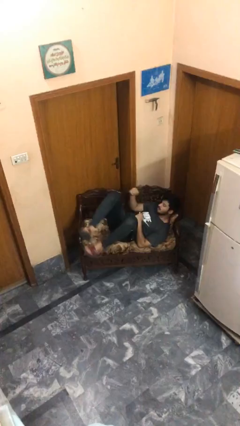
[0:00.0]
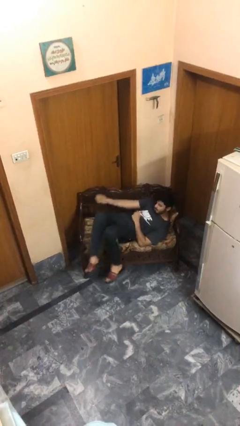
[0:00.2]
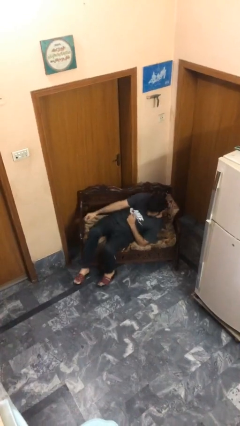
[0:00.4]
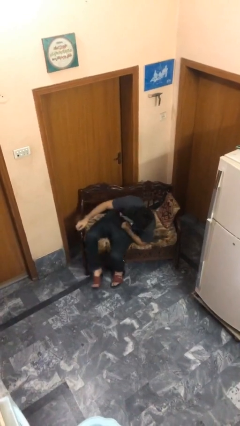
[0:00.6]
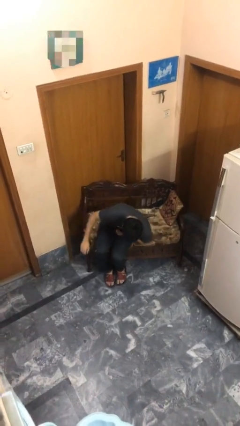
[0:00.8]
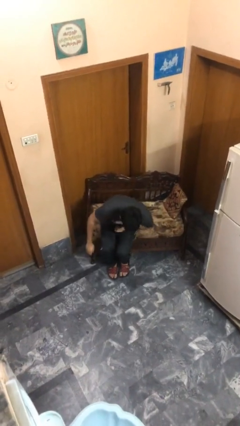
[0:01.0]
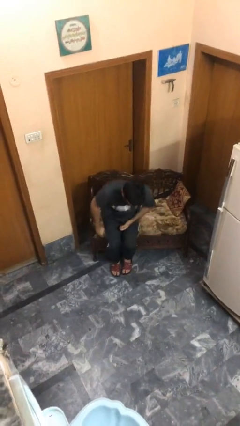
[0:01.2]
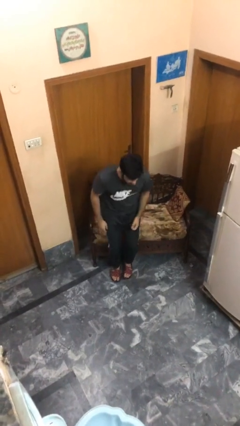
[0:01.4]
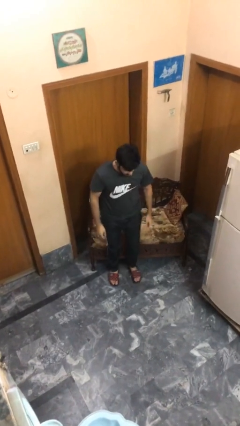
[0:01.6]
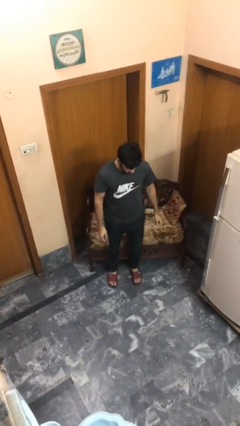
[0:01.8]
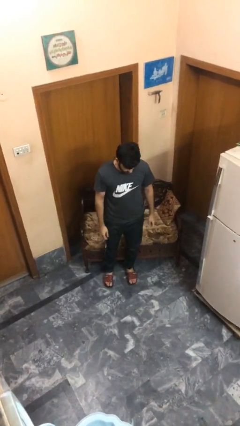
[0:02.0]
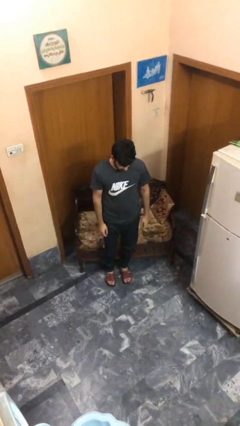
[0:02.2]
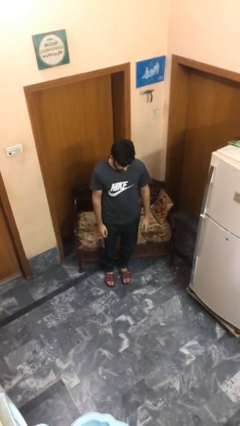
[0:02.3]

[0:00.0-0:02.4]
person stands up

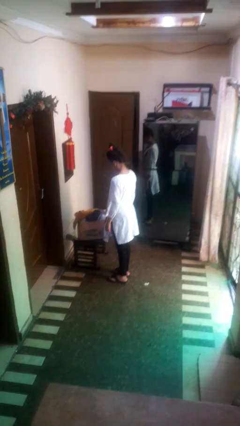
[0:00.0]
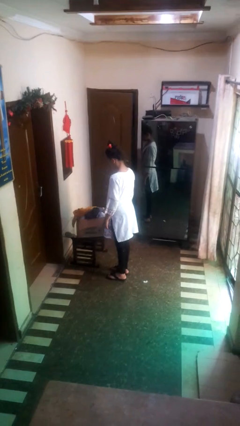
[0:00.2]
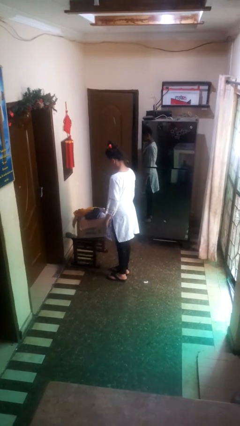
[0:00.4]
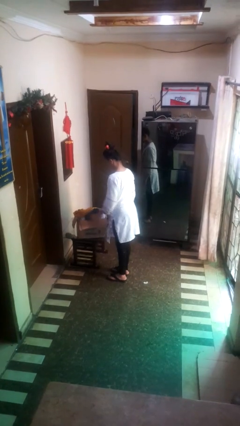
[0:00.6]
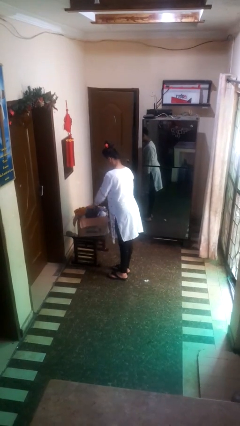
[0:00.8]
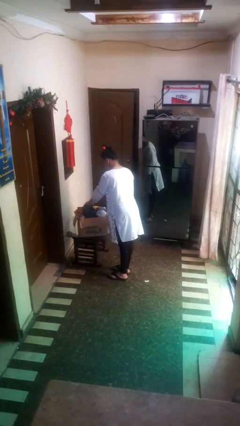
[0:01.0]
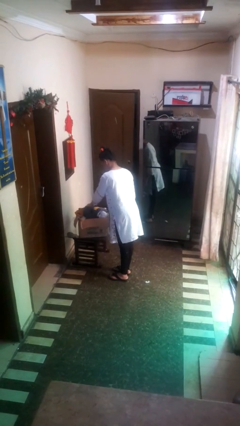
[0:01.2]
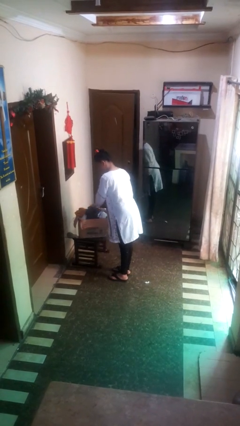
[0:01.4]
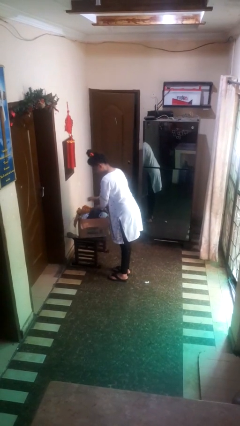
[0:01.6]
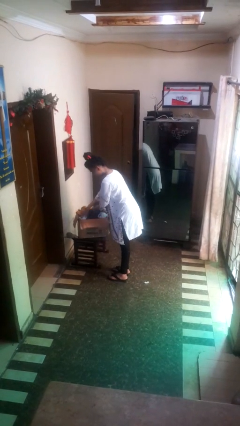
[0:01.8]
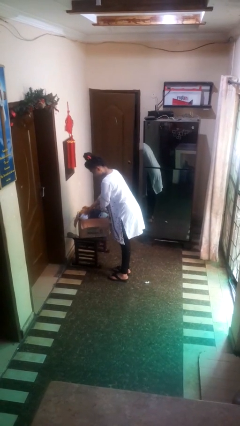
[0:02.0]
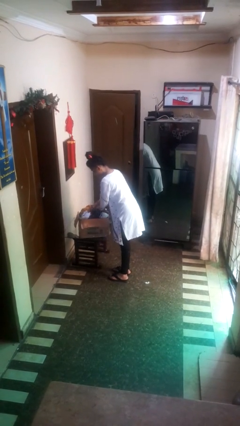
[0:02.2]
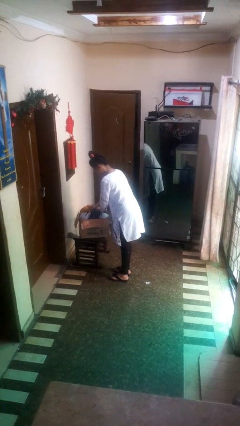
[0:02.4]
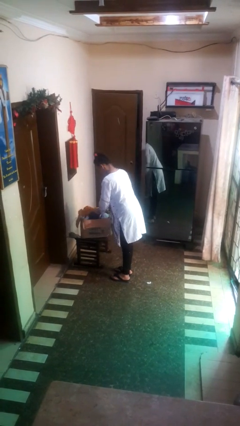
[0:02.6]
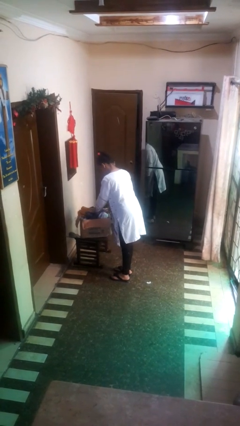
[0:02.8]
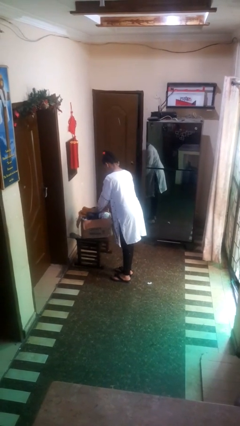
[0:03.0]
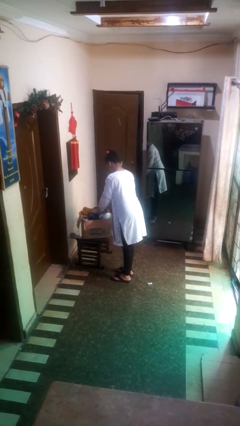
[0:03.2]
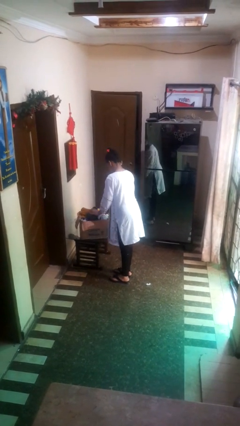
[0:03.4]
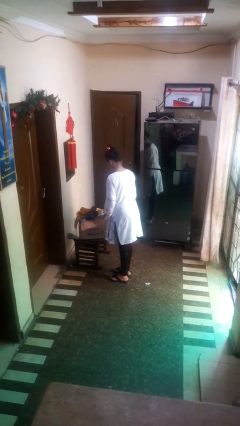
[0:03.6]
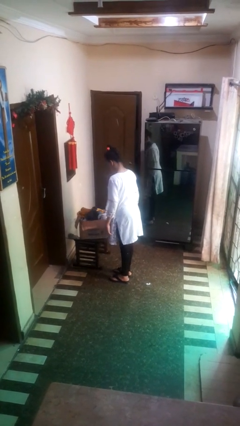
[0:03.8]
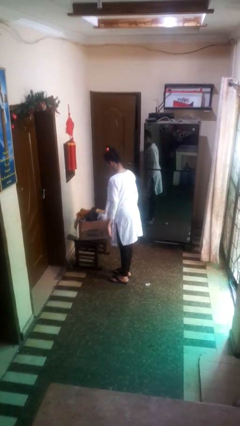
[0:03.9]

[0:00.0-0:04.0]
person searches in box

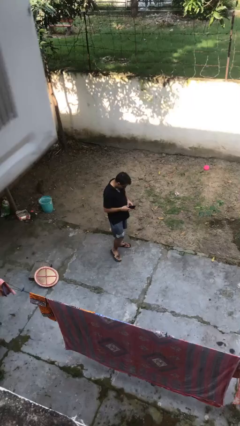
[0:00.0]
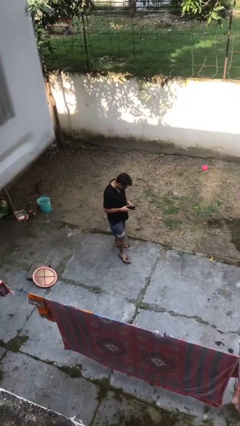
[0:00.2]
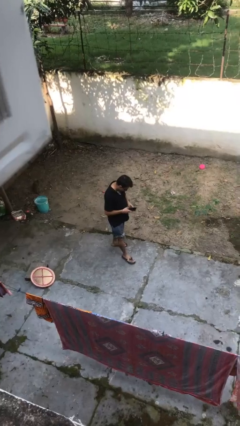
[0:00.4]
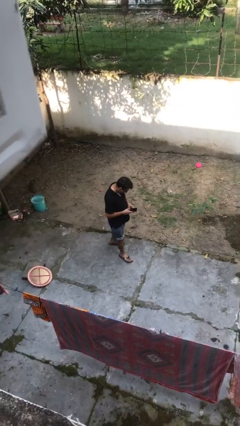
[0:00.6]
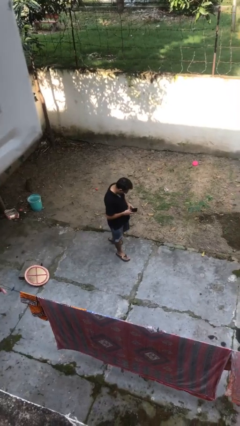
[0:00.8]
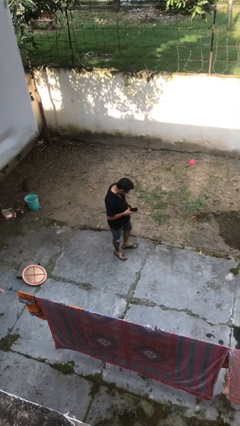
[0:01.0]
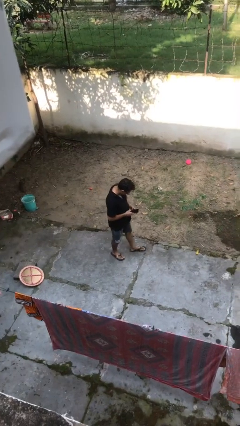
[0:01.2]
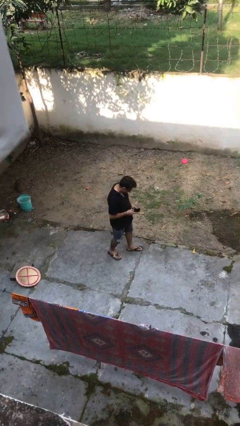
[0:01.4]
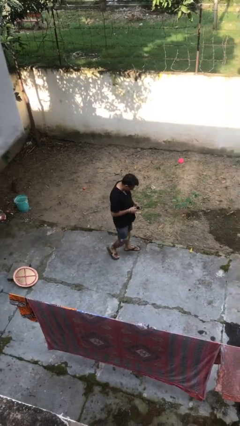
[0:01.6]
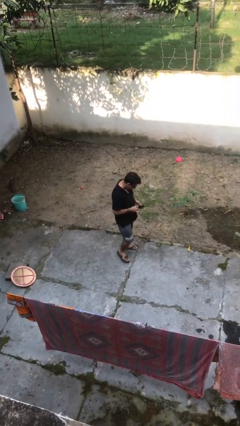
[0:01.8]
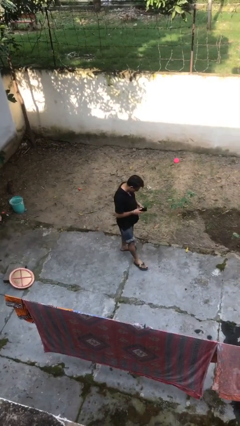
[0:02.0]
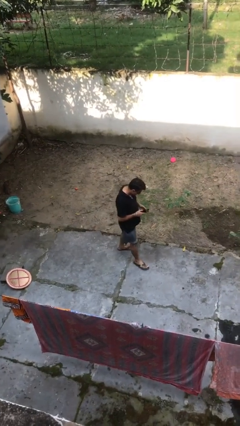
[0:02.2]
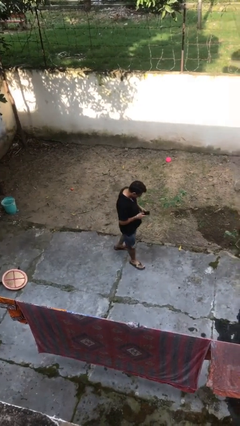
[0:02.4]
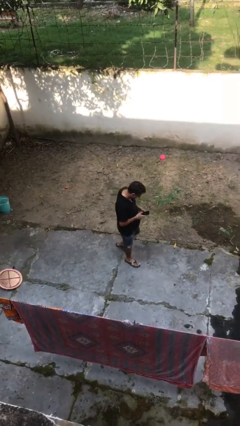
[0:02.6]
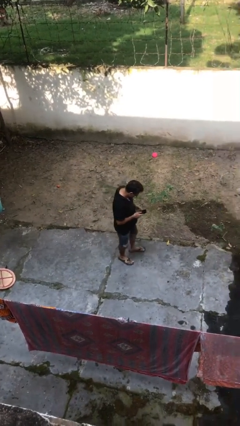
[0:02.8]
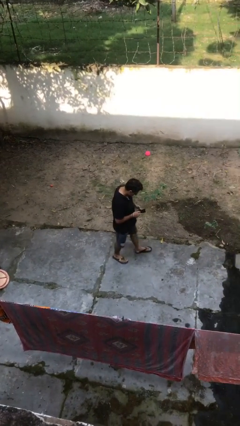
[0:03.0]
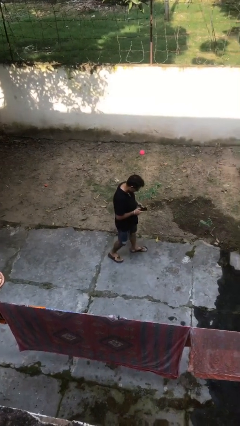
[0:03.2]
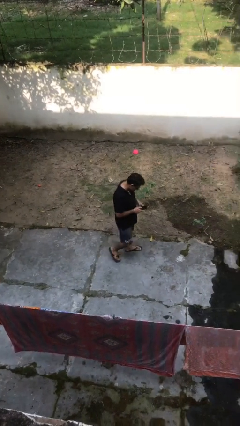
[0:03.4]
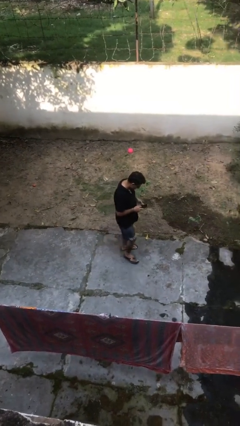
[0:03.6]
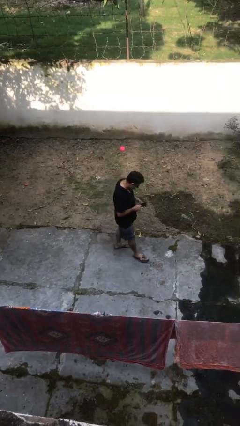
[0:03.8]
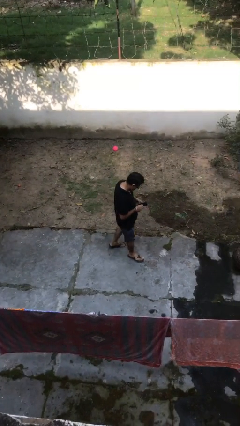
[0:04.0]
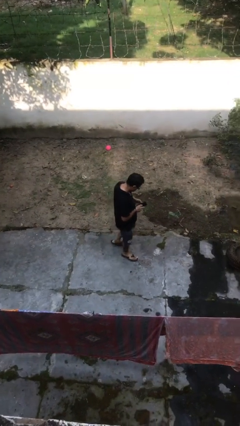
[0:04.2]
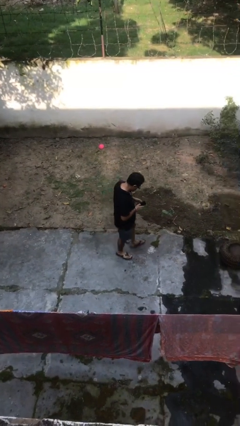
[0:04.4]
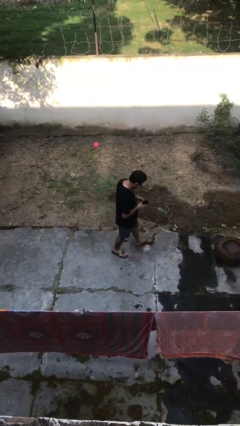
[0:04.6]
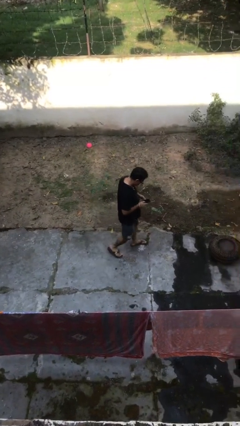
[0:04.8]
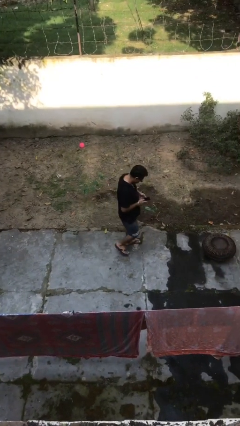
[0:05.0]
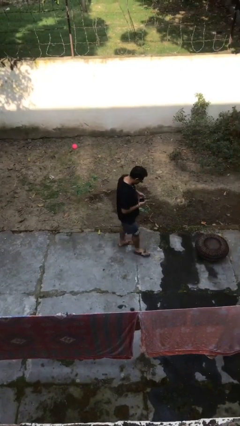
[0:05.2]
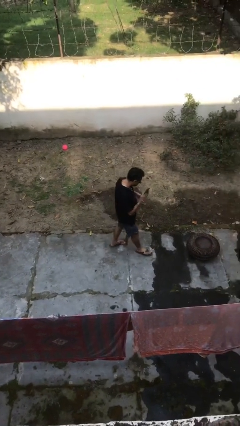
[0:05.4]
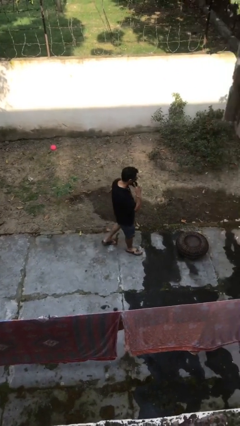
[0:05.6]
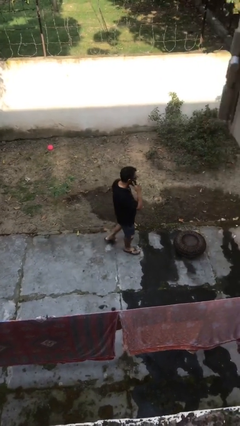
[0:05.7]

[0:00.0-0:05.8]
person texts on phone

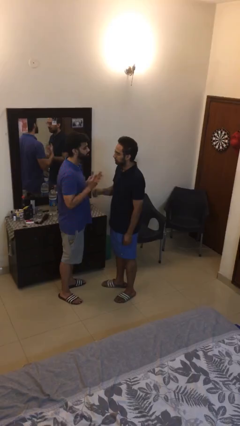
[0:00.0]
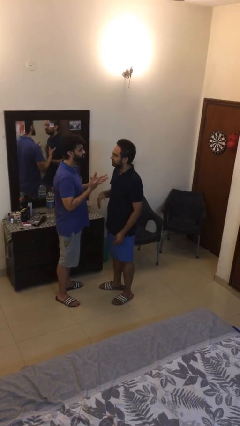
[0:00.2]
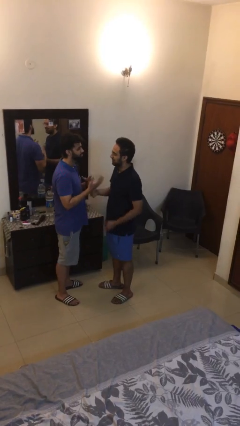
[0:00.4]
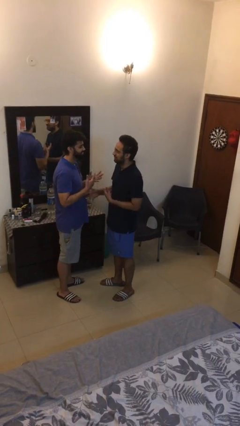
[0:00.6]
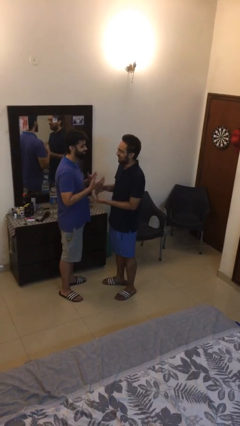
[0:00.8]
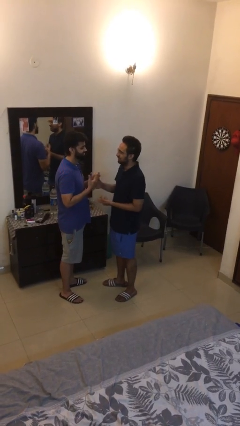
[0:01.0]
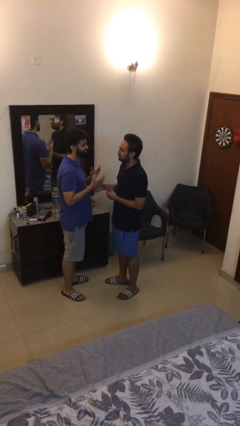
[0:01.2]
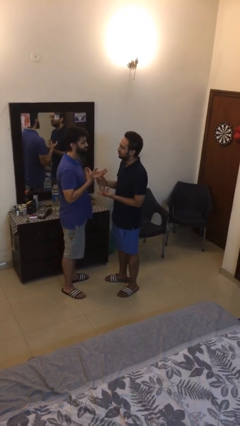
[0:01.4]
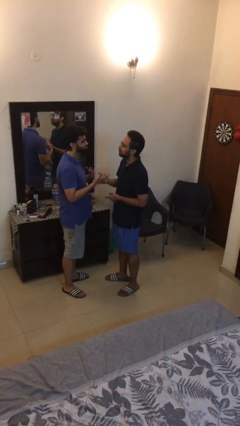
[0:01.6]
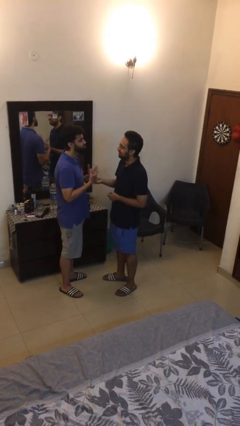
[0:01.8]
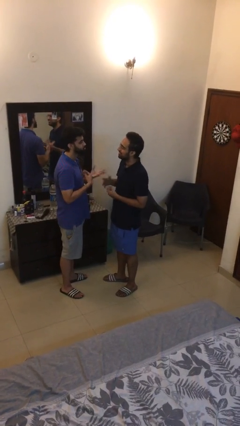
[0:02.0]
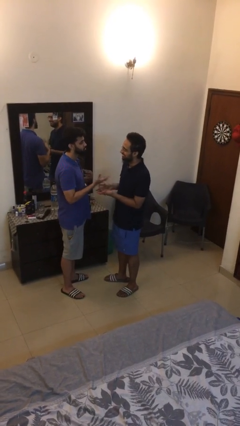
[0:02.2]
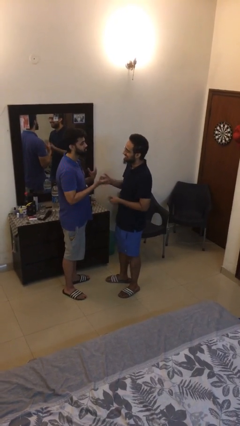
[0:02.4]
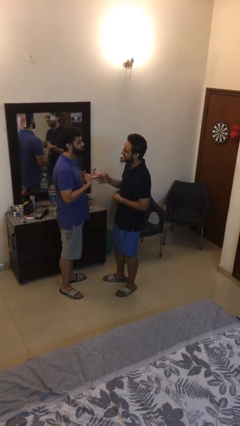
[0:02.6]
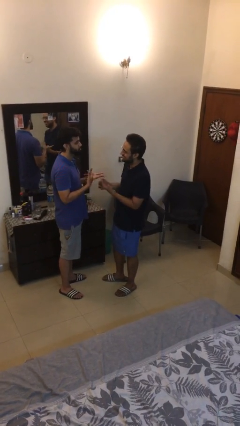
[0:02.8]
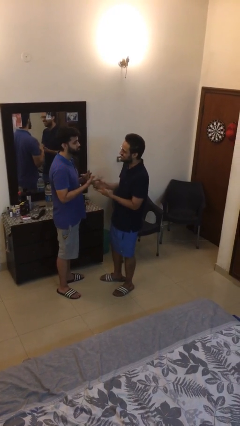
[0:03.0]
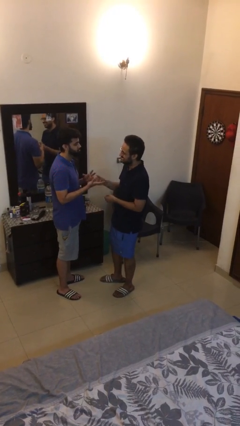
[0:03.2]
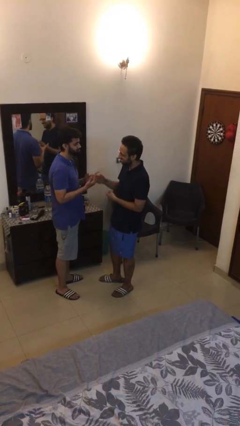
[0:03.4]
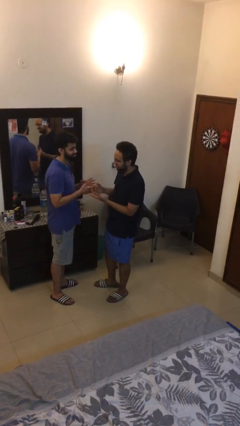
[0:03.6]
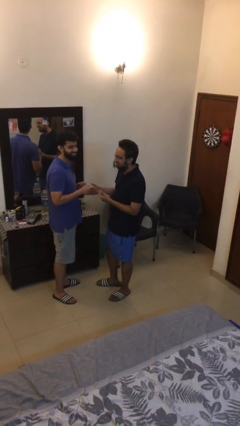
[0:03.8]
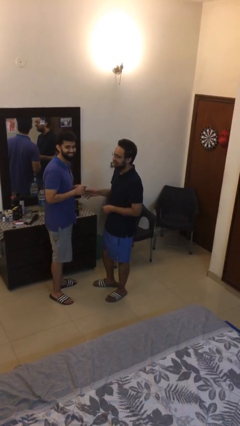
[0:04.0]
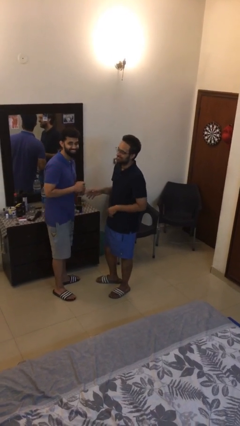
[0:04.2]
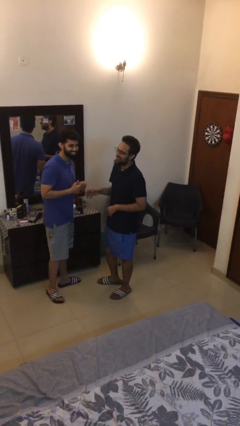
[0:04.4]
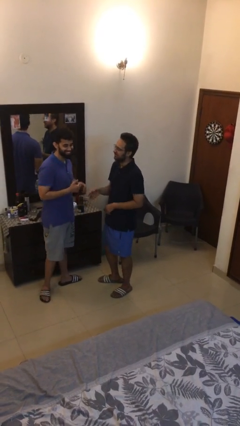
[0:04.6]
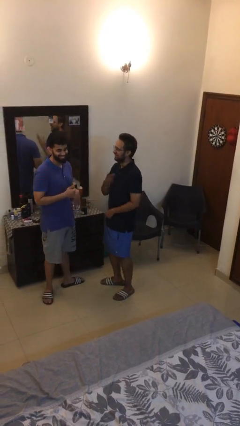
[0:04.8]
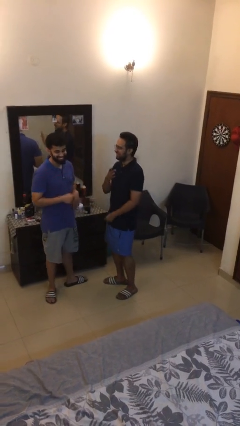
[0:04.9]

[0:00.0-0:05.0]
person talks to person

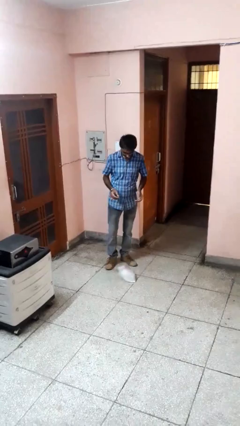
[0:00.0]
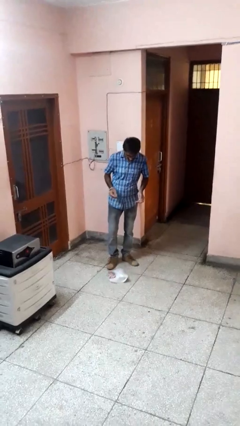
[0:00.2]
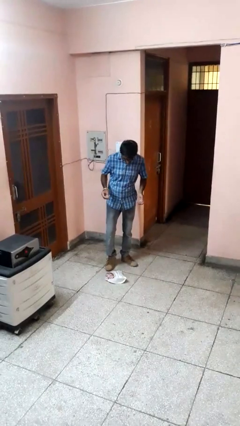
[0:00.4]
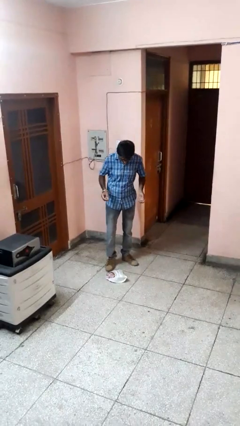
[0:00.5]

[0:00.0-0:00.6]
person drops object
